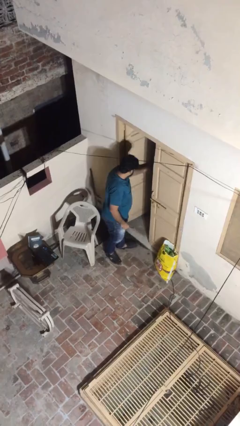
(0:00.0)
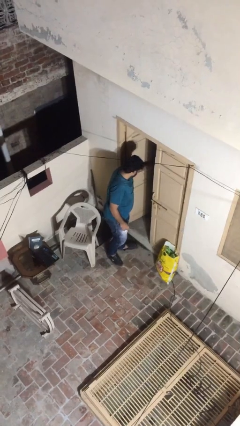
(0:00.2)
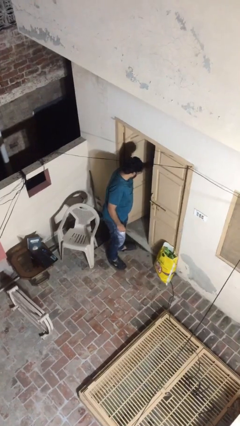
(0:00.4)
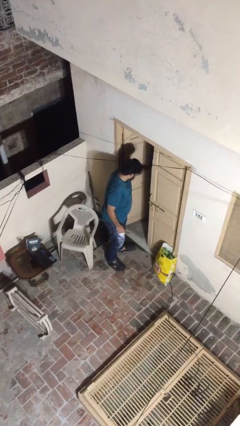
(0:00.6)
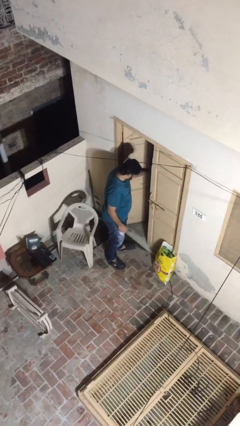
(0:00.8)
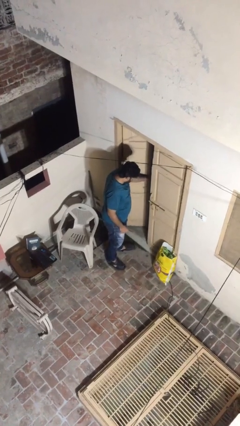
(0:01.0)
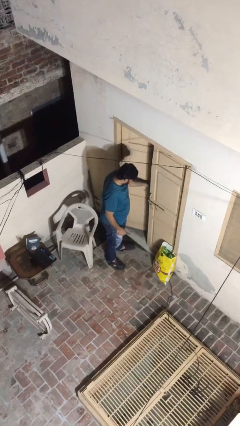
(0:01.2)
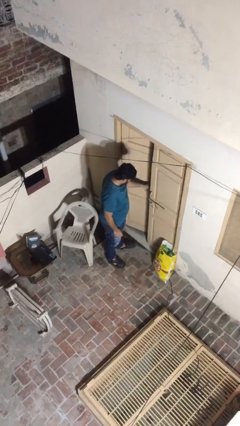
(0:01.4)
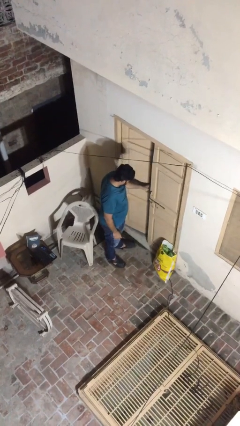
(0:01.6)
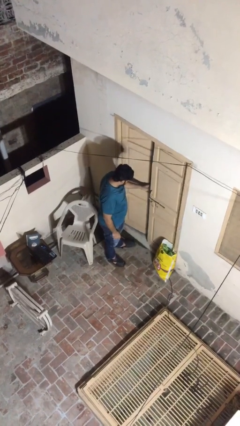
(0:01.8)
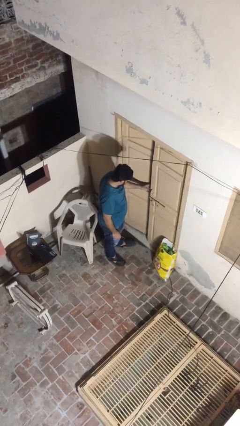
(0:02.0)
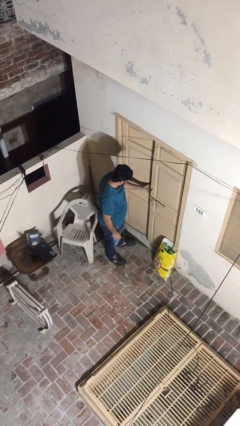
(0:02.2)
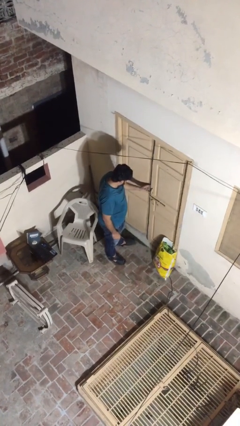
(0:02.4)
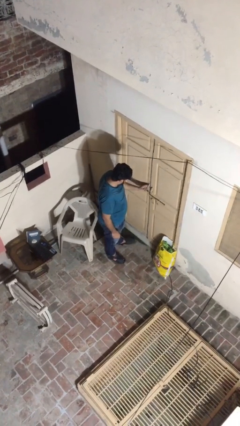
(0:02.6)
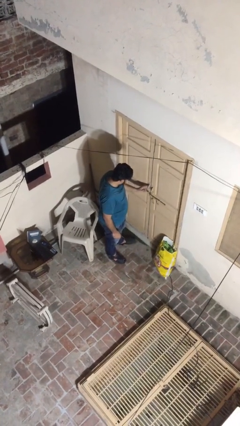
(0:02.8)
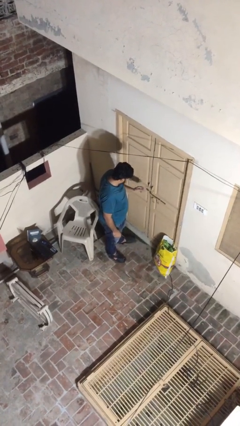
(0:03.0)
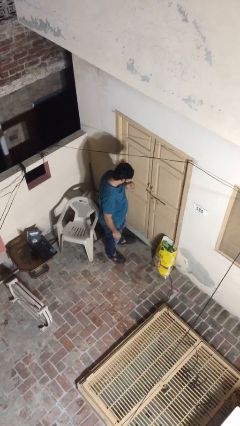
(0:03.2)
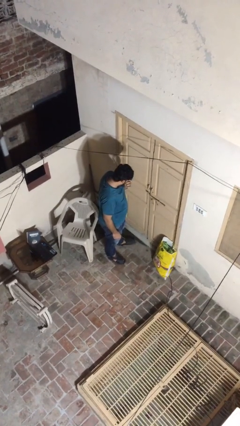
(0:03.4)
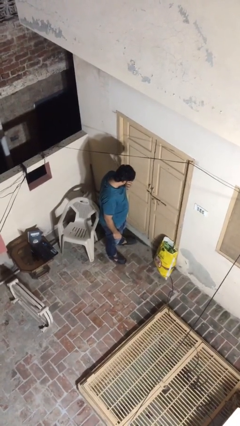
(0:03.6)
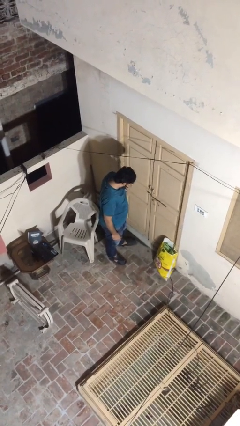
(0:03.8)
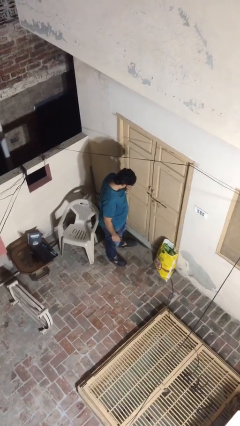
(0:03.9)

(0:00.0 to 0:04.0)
person closes facility door

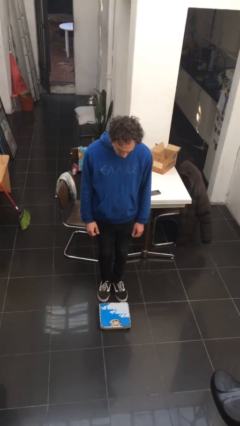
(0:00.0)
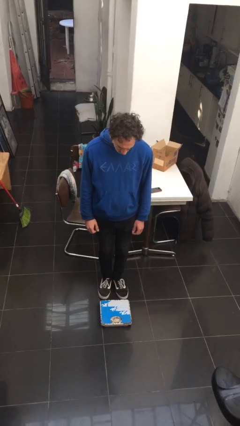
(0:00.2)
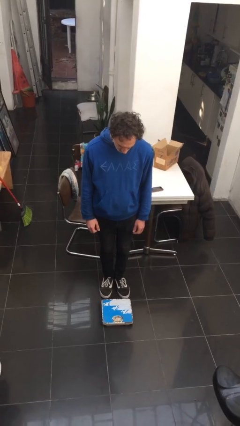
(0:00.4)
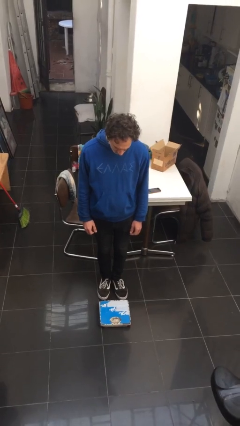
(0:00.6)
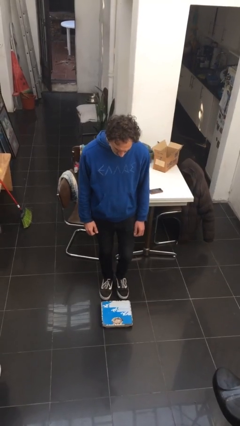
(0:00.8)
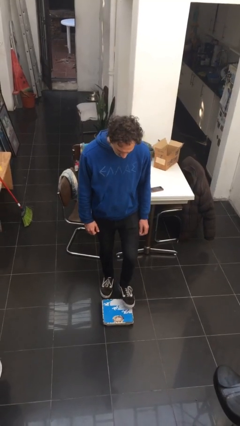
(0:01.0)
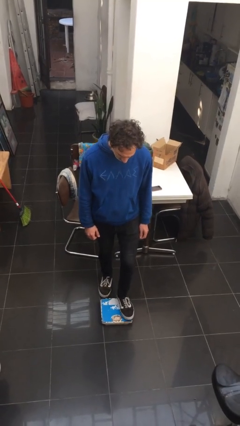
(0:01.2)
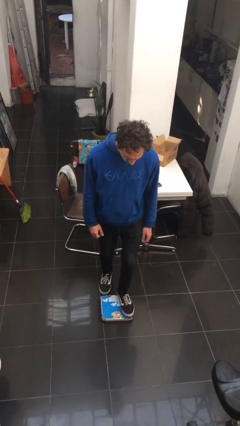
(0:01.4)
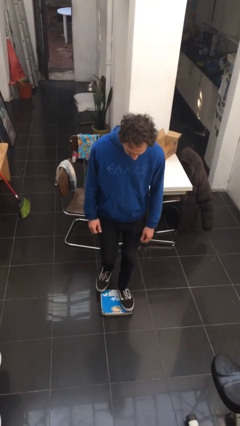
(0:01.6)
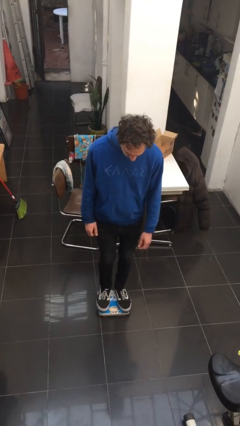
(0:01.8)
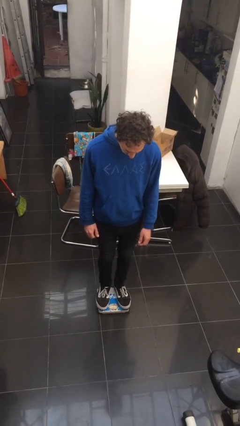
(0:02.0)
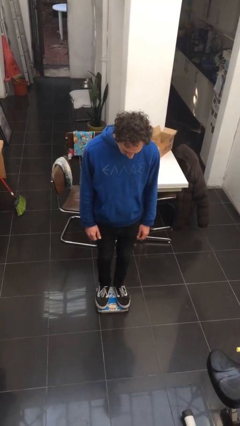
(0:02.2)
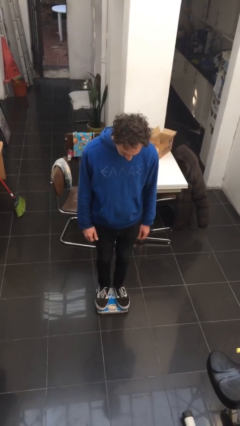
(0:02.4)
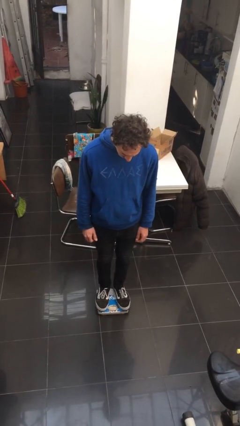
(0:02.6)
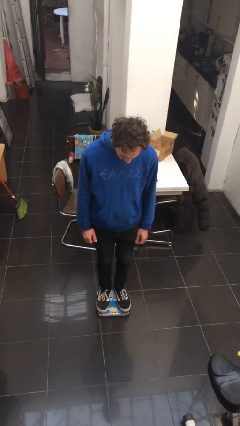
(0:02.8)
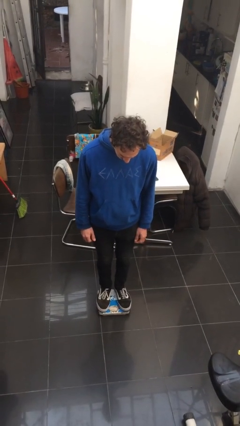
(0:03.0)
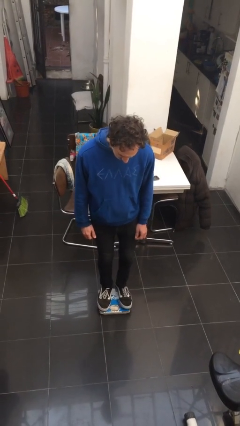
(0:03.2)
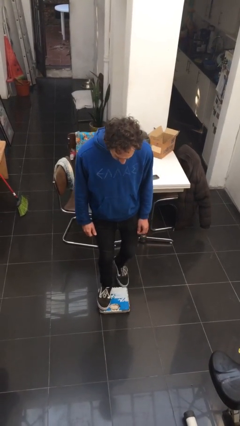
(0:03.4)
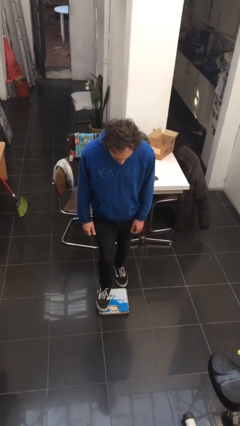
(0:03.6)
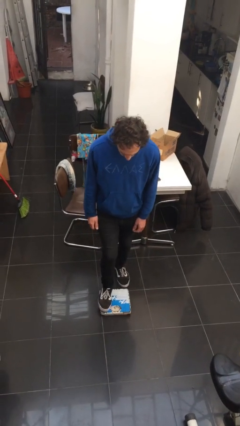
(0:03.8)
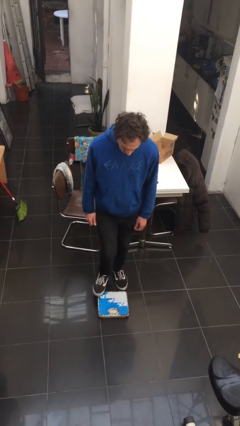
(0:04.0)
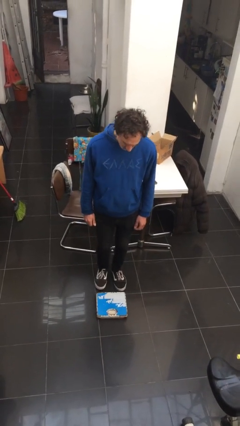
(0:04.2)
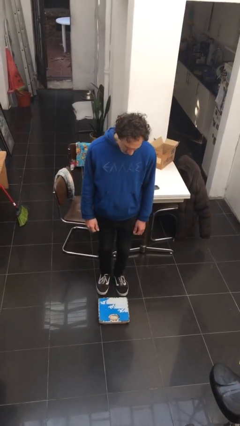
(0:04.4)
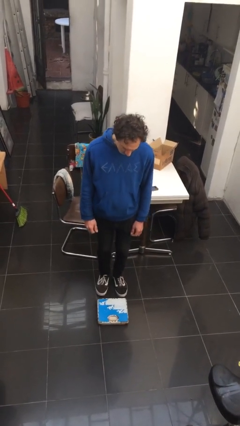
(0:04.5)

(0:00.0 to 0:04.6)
person uses bodyweight scale

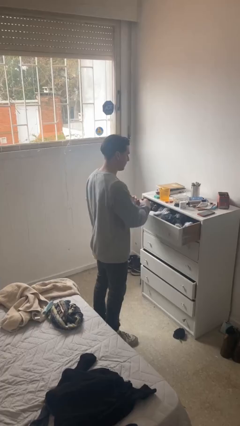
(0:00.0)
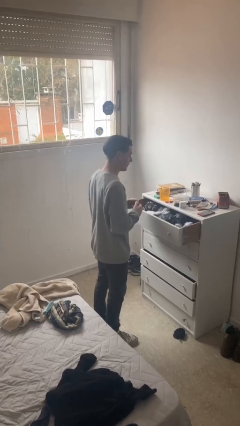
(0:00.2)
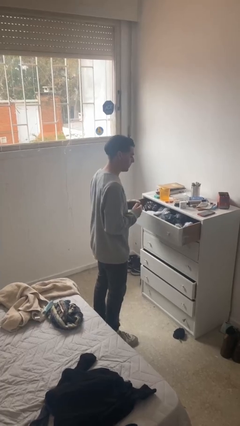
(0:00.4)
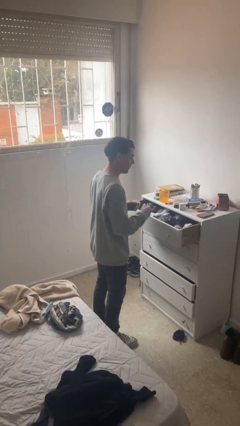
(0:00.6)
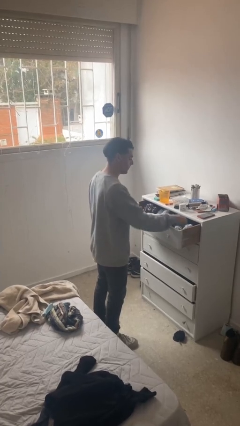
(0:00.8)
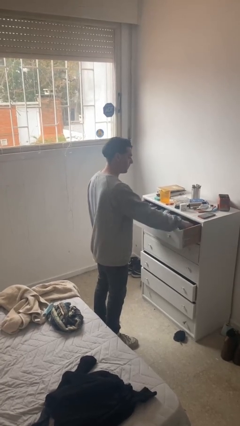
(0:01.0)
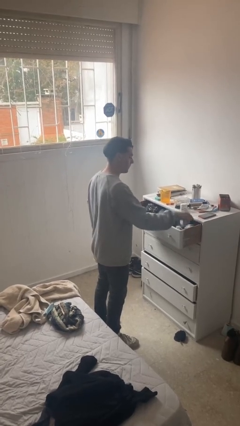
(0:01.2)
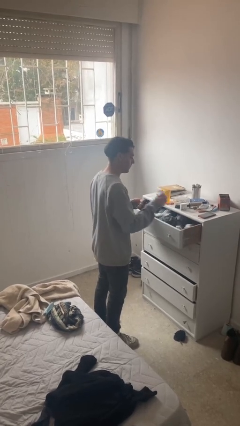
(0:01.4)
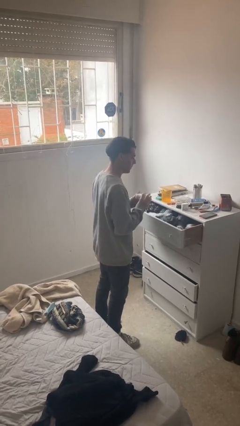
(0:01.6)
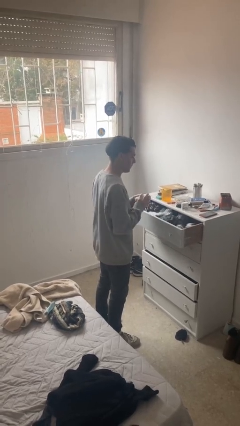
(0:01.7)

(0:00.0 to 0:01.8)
person takes clothes from dresser

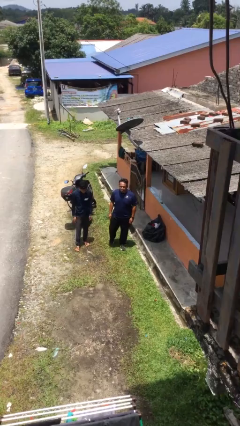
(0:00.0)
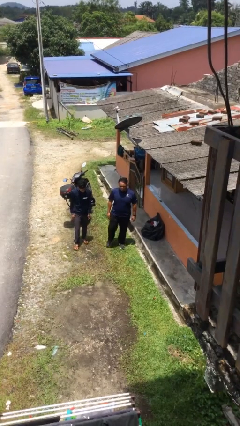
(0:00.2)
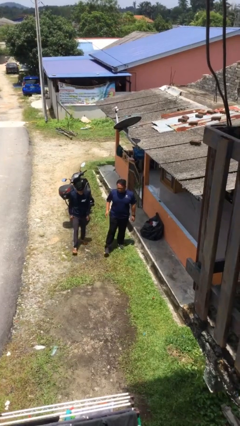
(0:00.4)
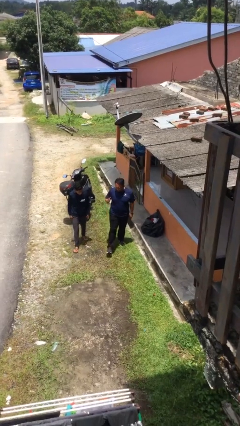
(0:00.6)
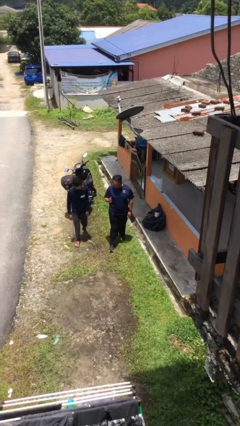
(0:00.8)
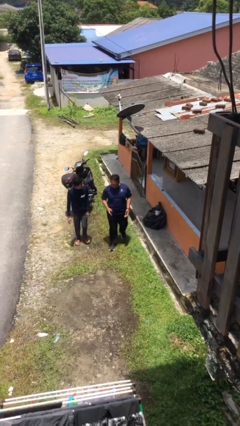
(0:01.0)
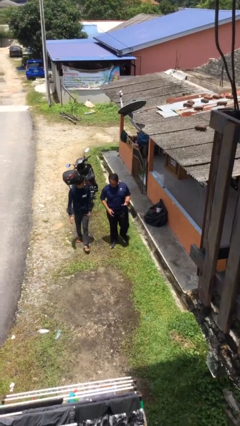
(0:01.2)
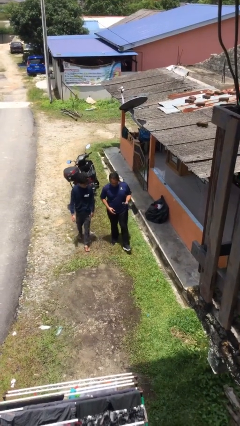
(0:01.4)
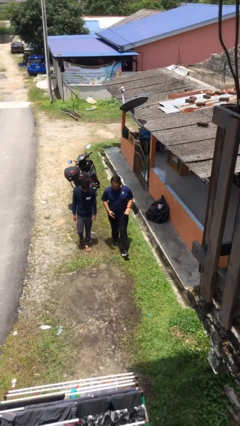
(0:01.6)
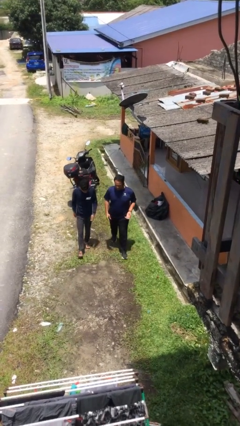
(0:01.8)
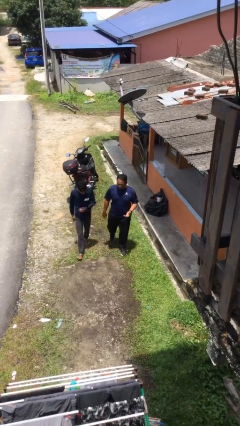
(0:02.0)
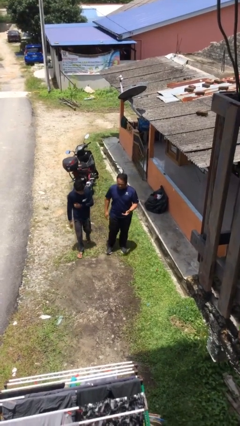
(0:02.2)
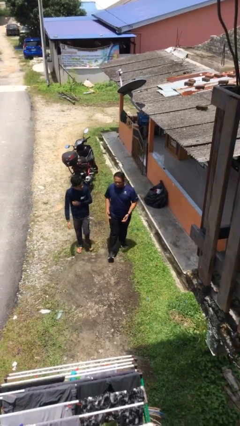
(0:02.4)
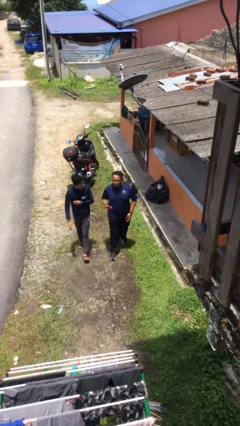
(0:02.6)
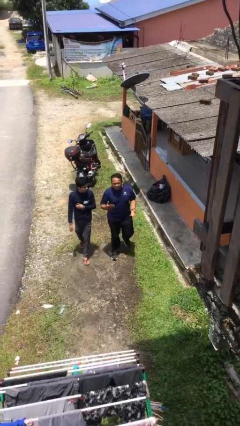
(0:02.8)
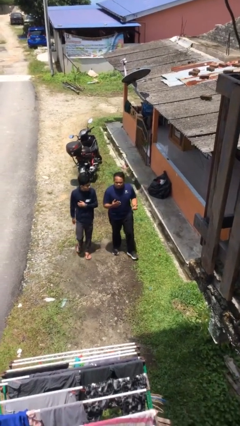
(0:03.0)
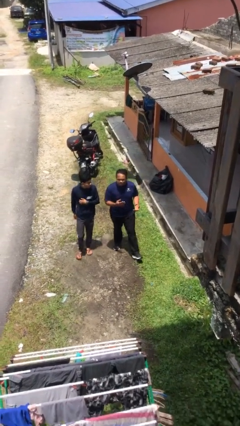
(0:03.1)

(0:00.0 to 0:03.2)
person talks to person

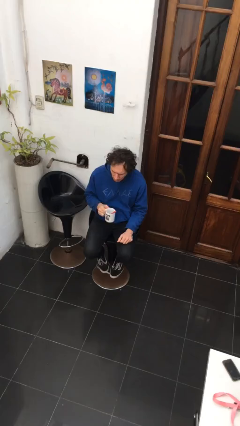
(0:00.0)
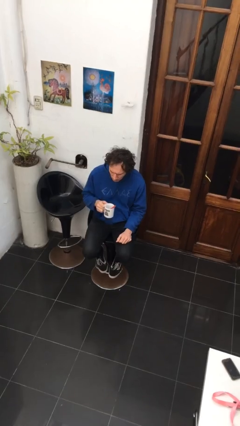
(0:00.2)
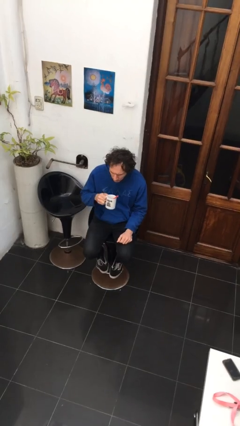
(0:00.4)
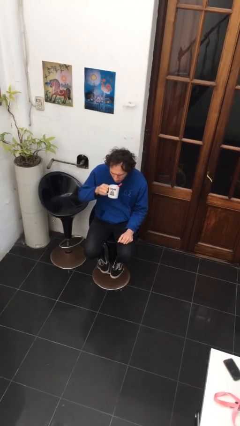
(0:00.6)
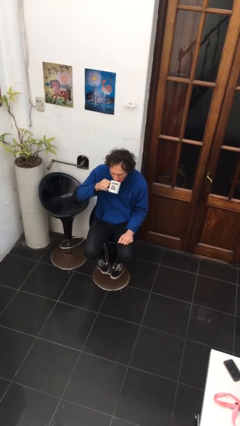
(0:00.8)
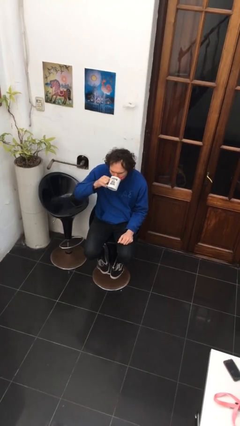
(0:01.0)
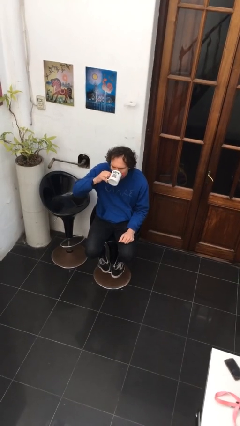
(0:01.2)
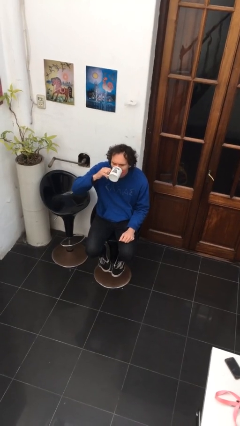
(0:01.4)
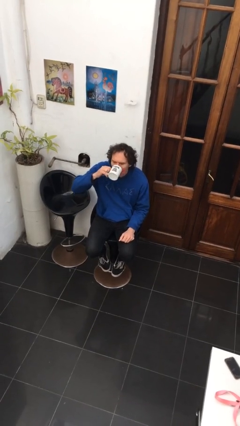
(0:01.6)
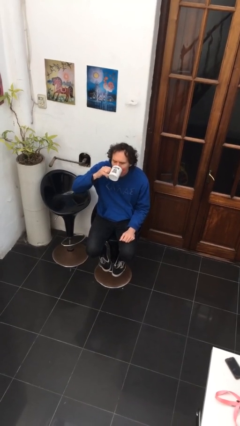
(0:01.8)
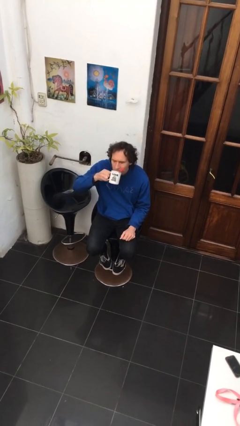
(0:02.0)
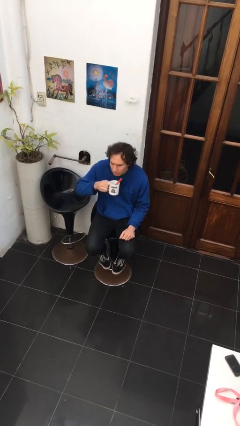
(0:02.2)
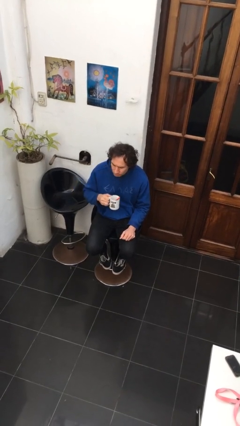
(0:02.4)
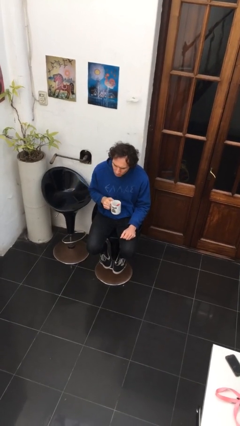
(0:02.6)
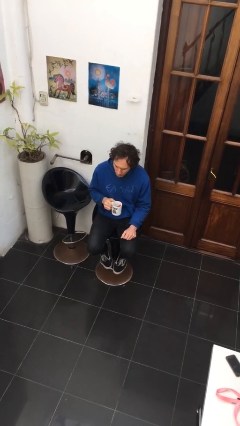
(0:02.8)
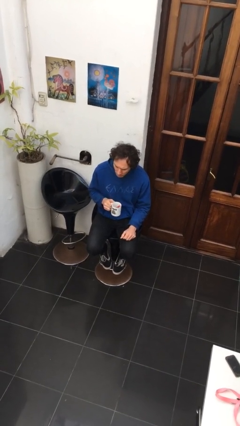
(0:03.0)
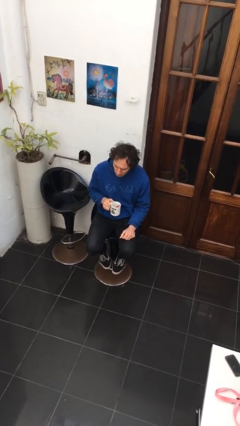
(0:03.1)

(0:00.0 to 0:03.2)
person drinks from mug

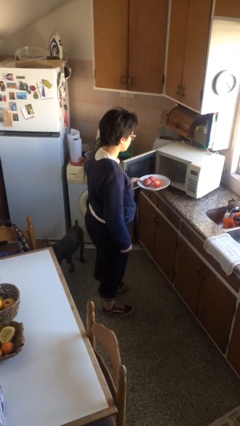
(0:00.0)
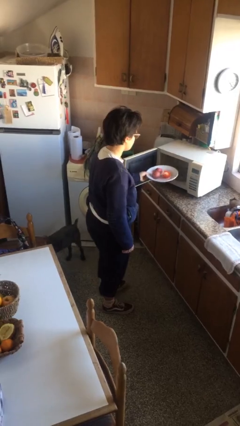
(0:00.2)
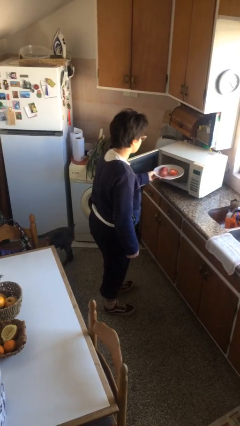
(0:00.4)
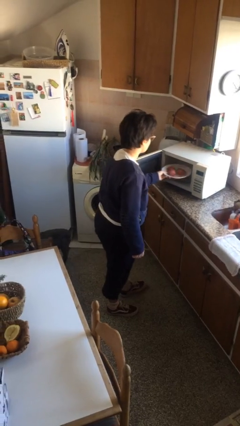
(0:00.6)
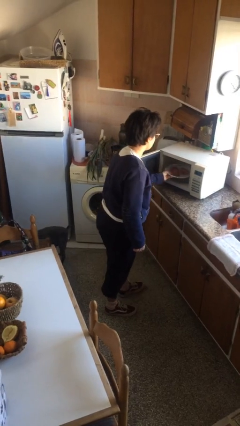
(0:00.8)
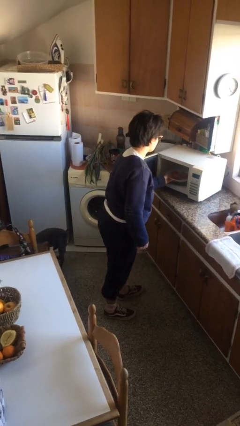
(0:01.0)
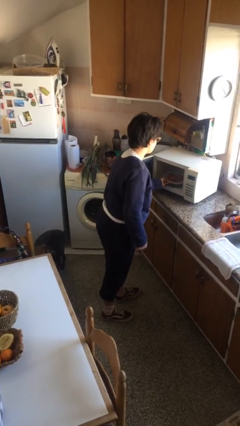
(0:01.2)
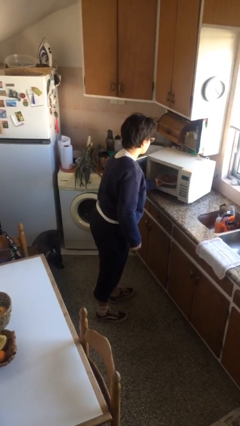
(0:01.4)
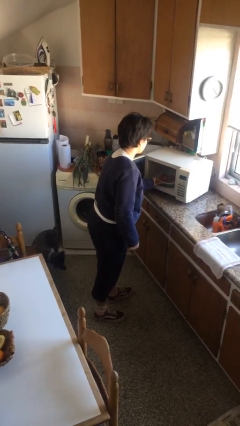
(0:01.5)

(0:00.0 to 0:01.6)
person puts object into microwave
